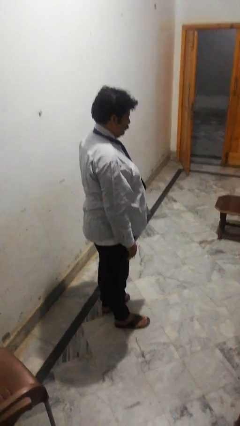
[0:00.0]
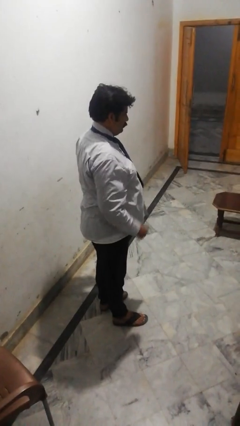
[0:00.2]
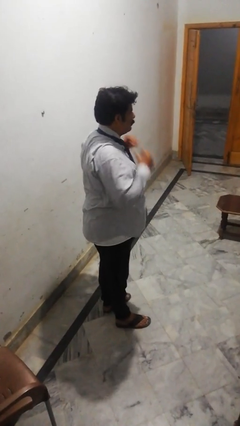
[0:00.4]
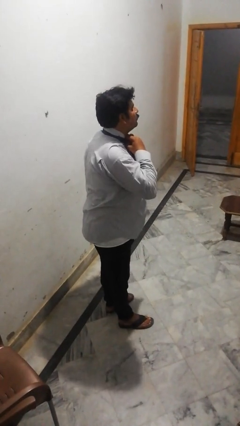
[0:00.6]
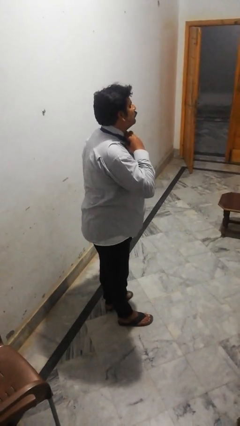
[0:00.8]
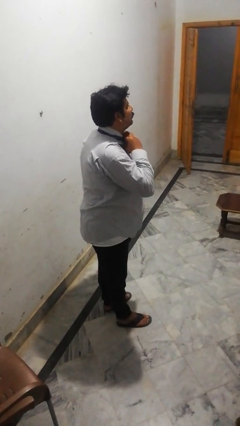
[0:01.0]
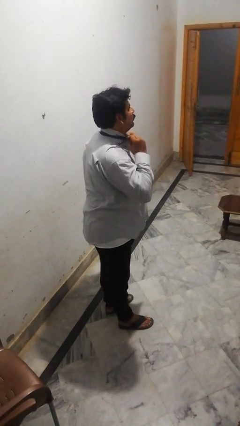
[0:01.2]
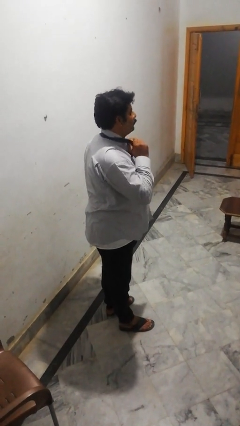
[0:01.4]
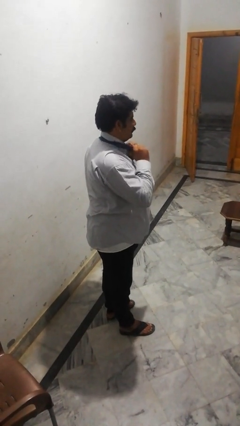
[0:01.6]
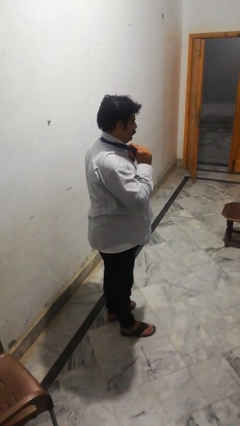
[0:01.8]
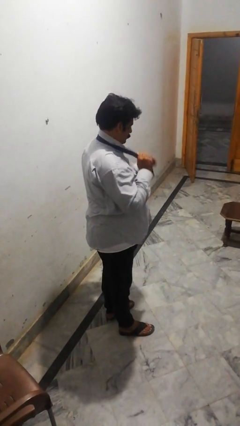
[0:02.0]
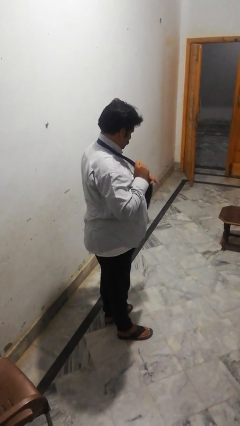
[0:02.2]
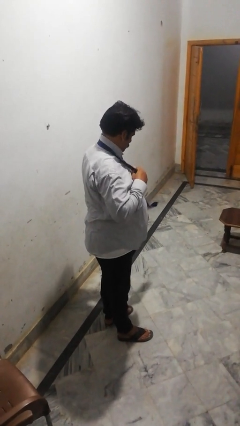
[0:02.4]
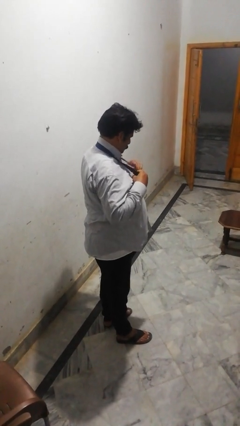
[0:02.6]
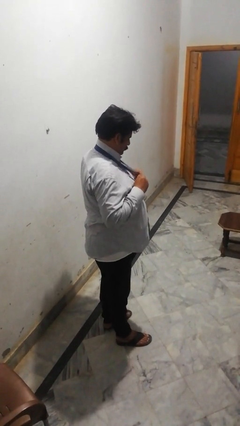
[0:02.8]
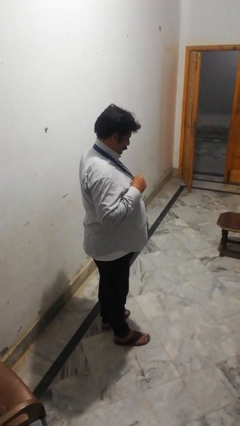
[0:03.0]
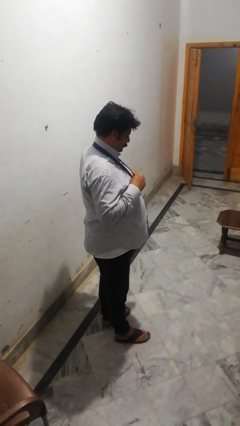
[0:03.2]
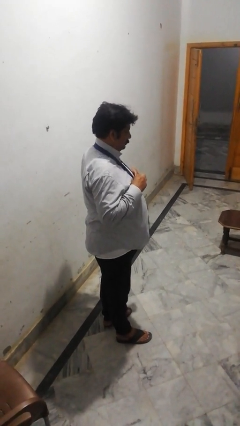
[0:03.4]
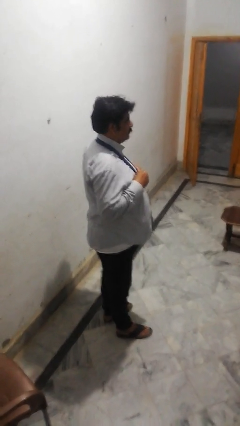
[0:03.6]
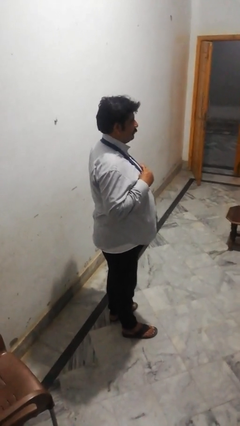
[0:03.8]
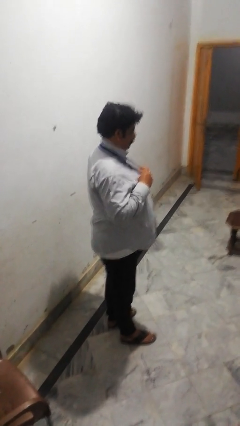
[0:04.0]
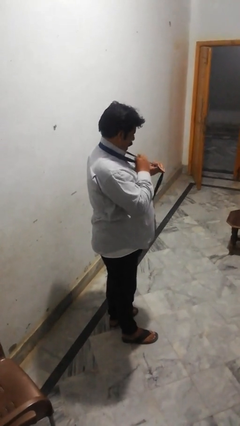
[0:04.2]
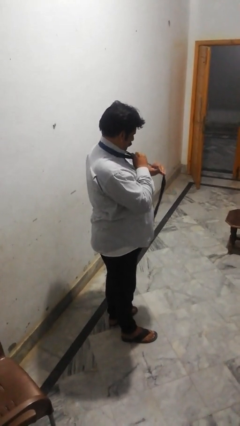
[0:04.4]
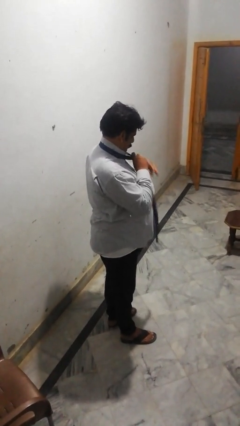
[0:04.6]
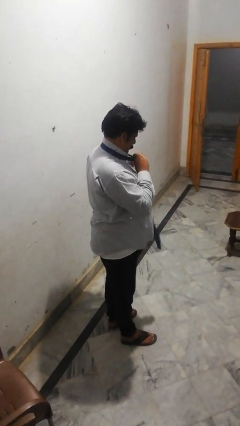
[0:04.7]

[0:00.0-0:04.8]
person takes off necktie

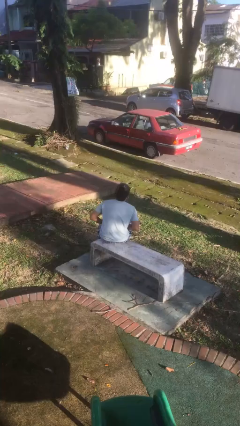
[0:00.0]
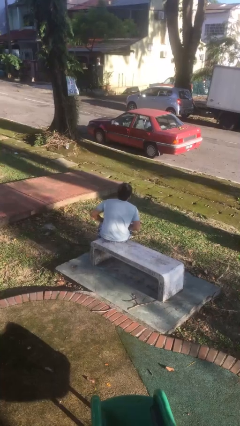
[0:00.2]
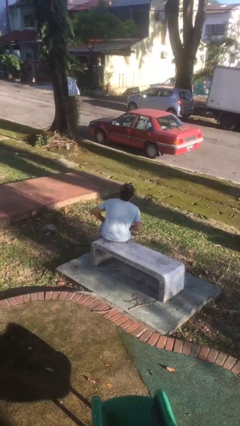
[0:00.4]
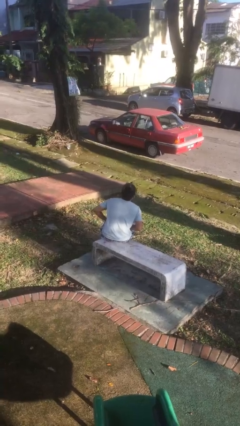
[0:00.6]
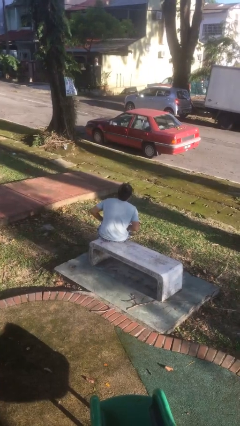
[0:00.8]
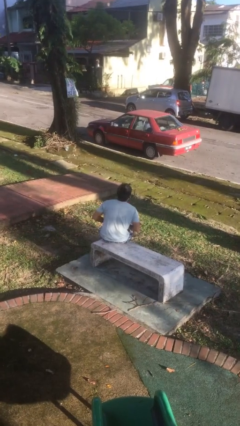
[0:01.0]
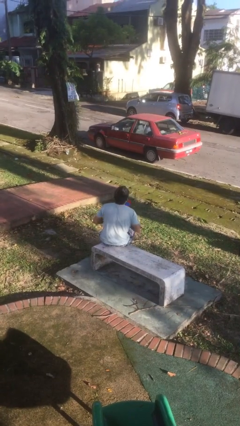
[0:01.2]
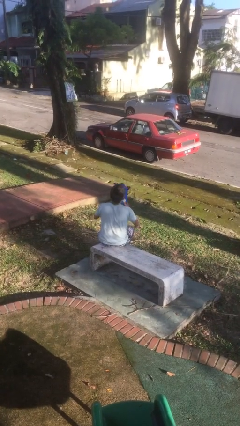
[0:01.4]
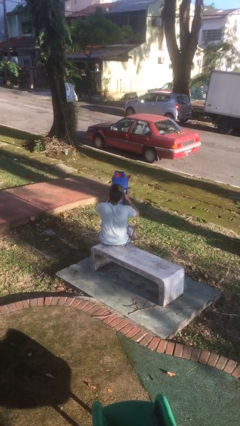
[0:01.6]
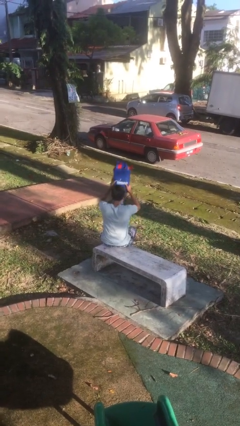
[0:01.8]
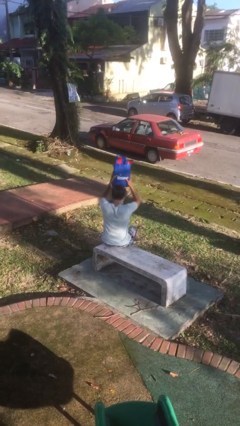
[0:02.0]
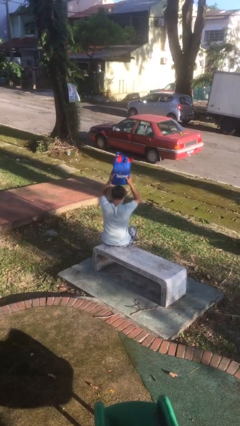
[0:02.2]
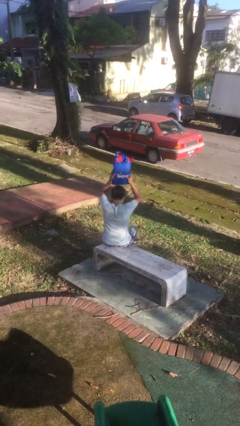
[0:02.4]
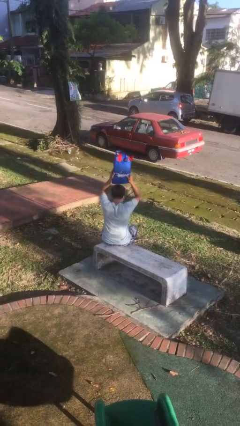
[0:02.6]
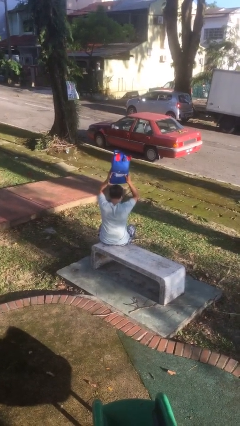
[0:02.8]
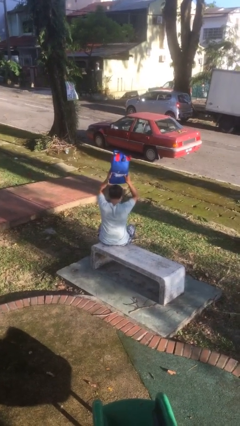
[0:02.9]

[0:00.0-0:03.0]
person holds object above head

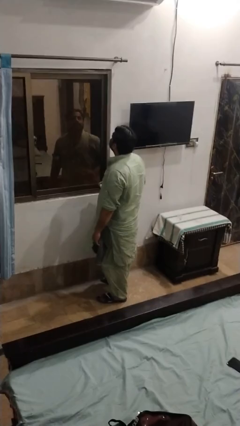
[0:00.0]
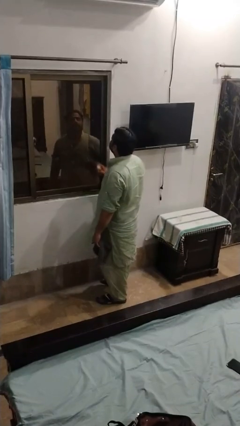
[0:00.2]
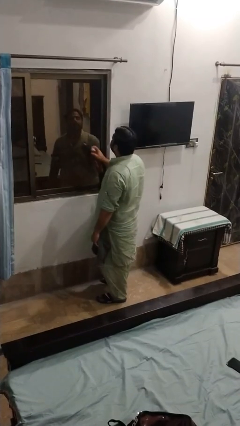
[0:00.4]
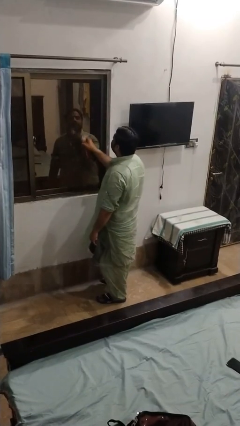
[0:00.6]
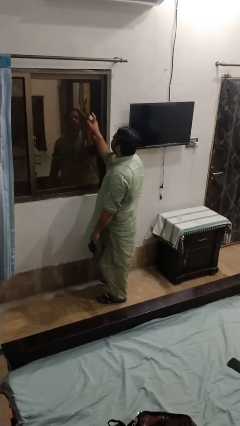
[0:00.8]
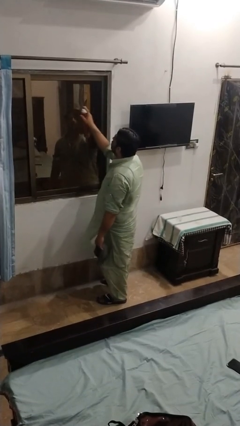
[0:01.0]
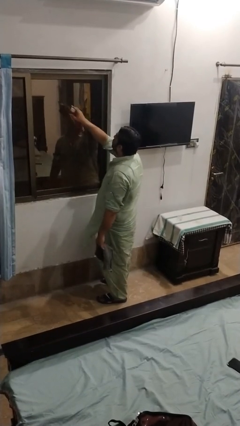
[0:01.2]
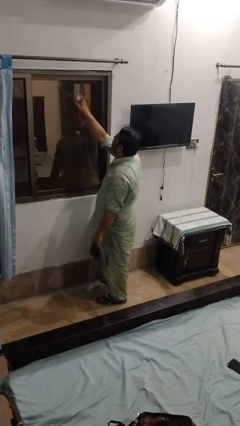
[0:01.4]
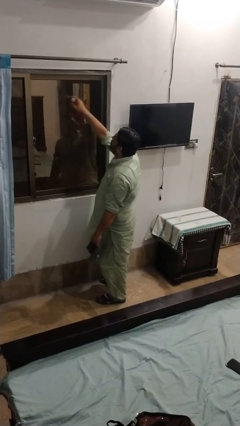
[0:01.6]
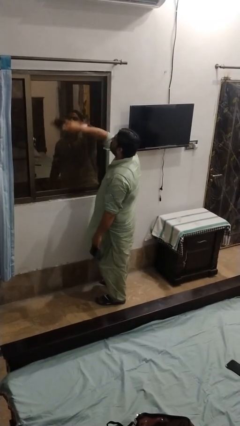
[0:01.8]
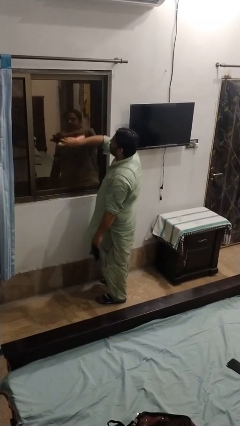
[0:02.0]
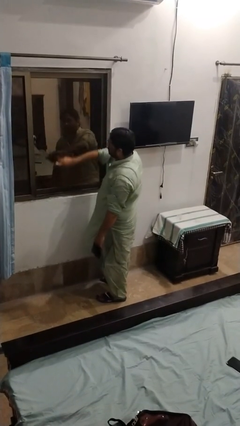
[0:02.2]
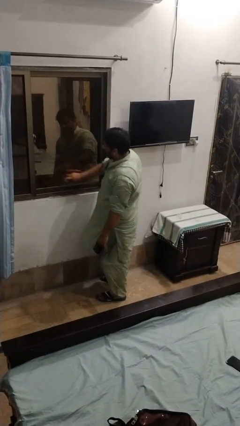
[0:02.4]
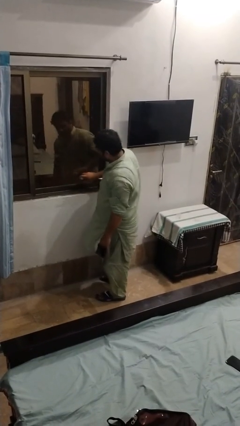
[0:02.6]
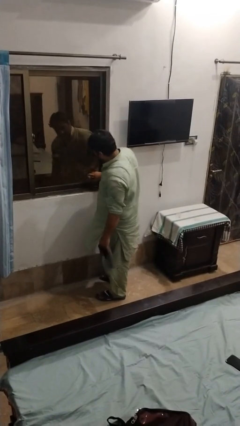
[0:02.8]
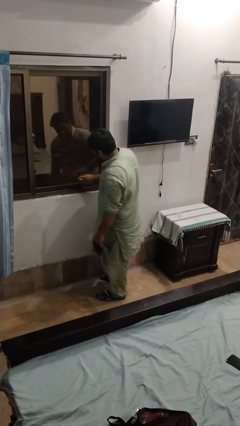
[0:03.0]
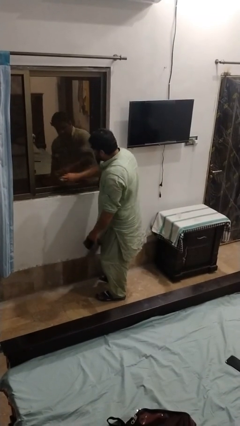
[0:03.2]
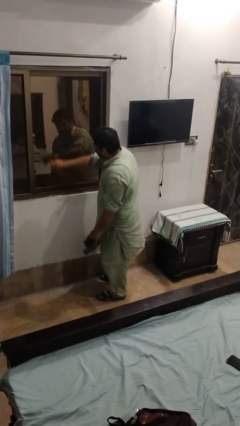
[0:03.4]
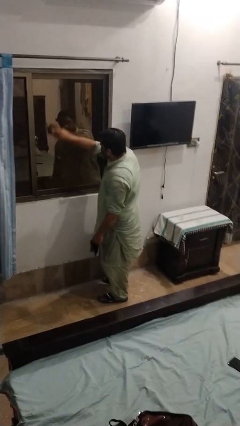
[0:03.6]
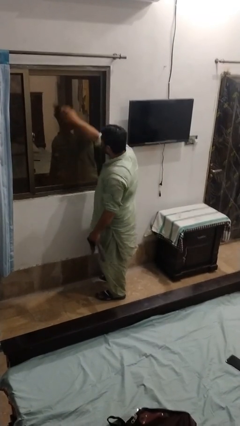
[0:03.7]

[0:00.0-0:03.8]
person sprays from bottle

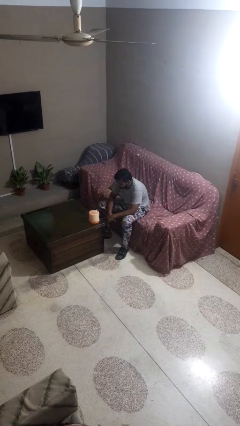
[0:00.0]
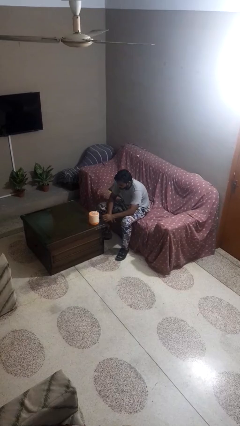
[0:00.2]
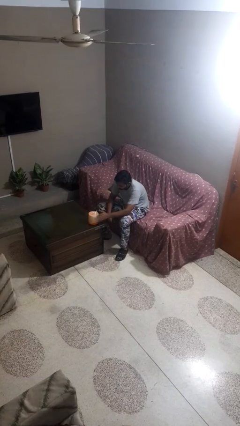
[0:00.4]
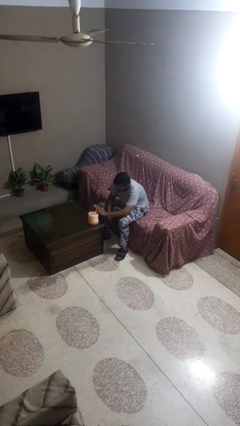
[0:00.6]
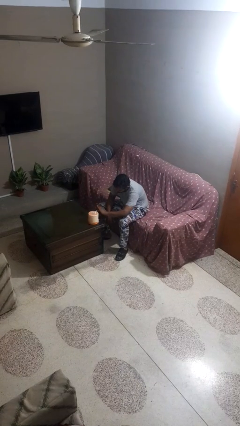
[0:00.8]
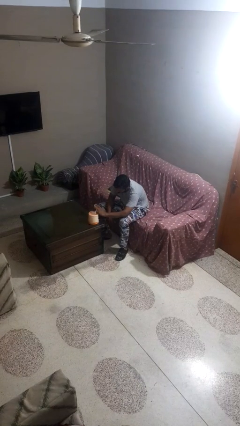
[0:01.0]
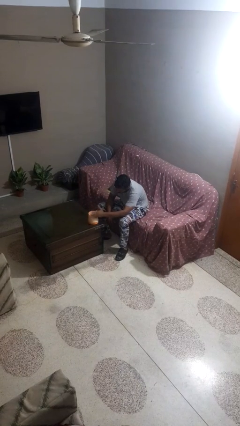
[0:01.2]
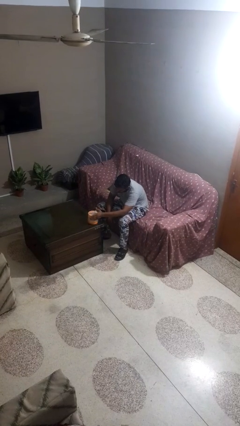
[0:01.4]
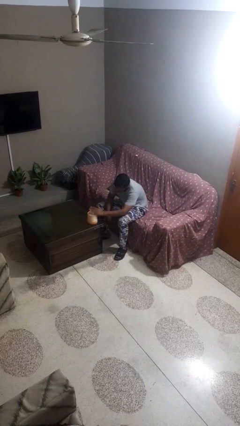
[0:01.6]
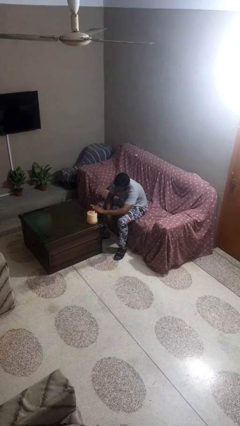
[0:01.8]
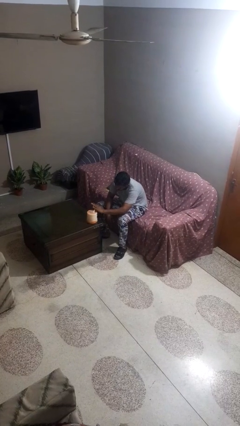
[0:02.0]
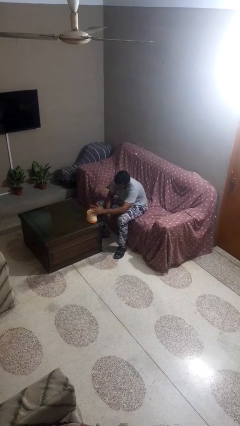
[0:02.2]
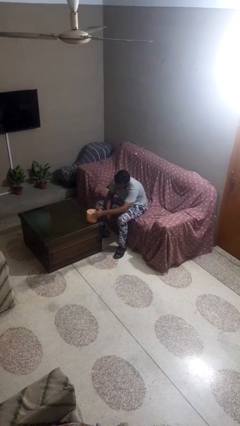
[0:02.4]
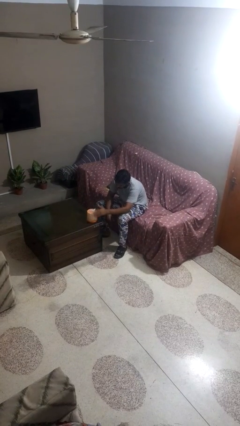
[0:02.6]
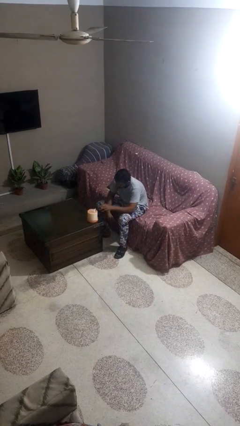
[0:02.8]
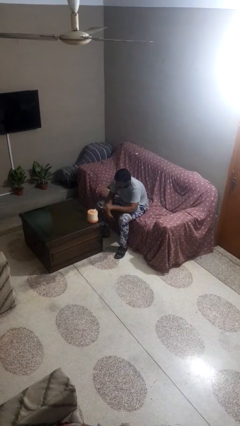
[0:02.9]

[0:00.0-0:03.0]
person waves hand over object

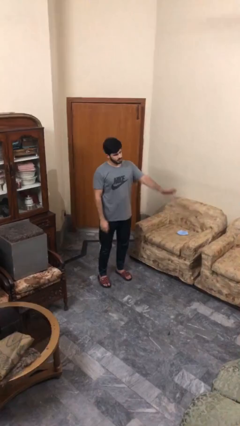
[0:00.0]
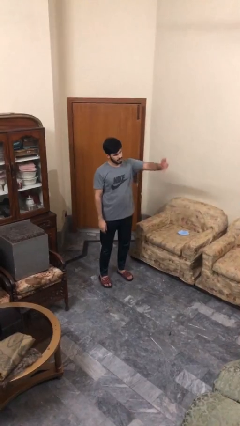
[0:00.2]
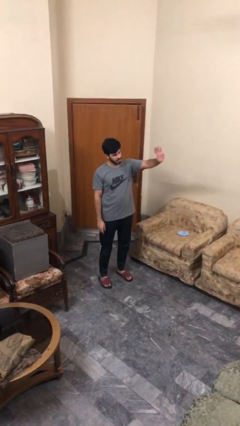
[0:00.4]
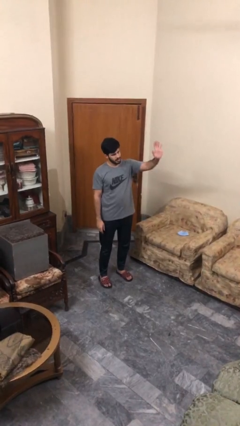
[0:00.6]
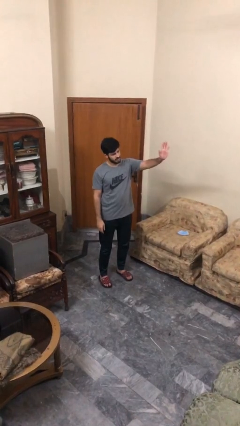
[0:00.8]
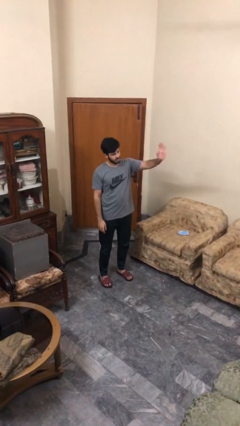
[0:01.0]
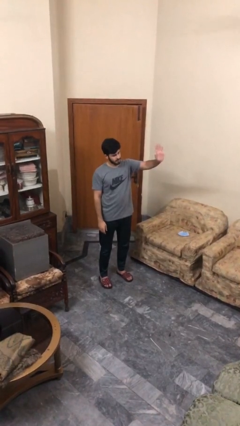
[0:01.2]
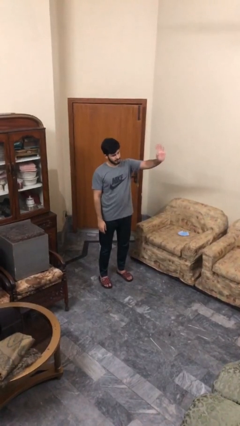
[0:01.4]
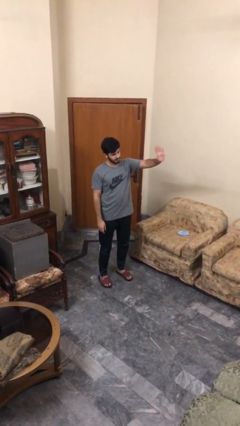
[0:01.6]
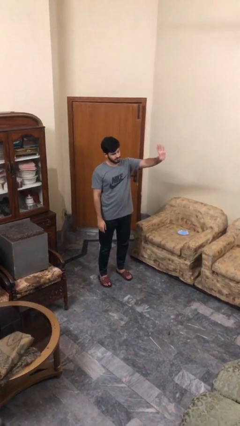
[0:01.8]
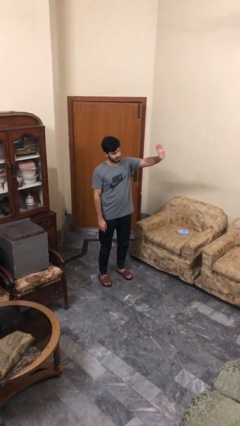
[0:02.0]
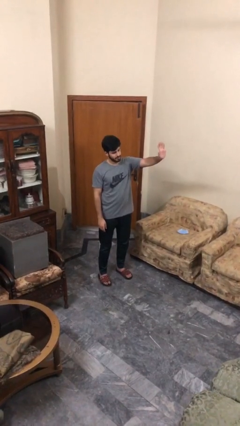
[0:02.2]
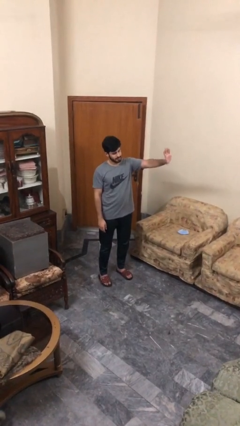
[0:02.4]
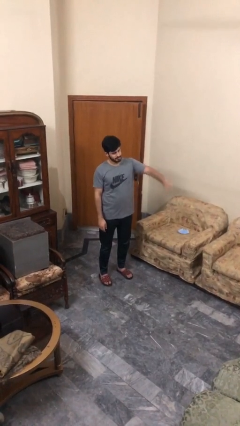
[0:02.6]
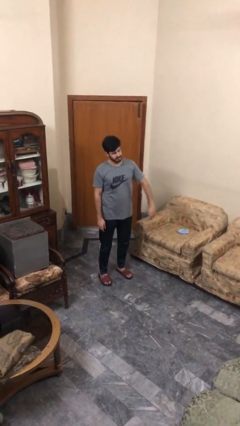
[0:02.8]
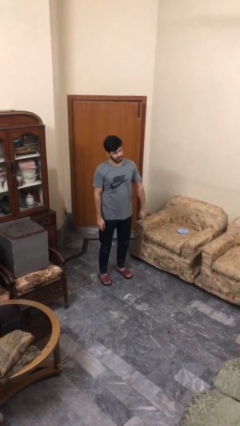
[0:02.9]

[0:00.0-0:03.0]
person waves at person

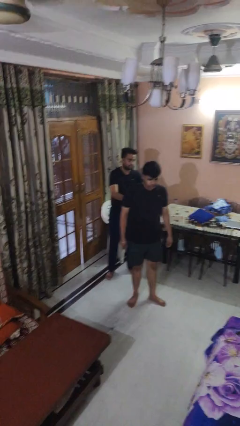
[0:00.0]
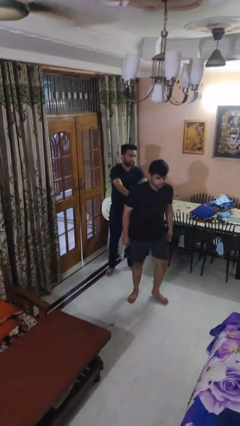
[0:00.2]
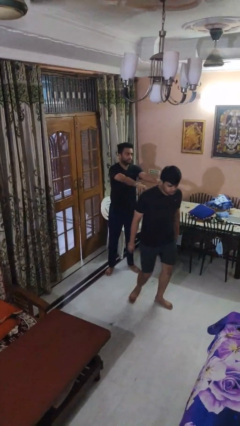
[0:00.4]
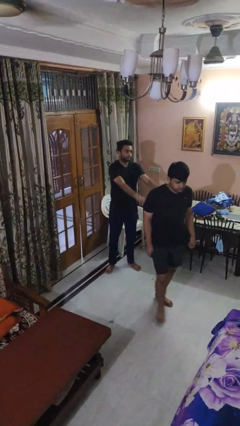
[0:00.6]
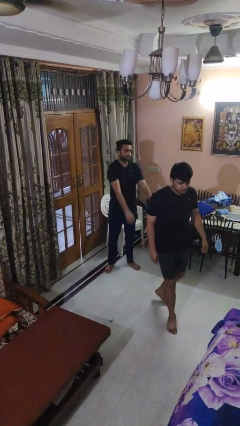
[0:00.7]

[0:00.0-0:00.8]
person shoves person
